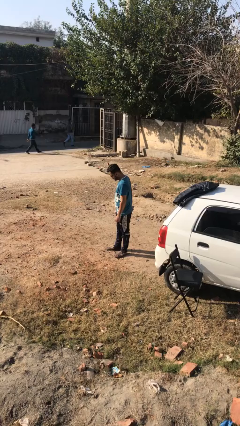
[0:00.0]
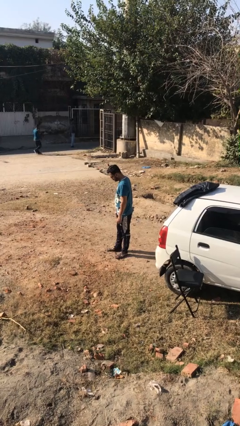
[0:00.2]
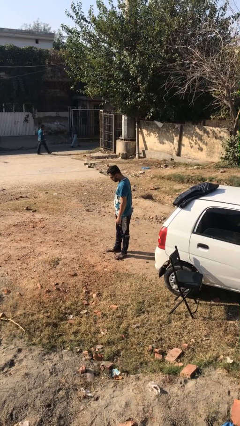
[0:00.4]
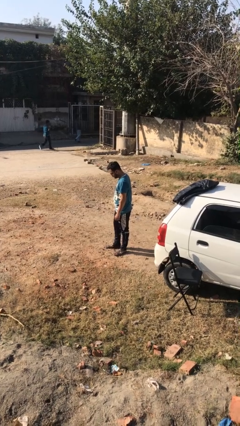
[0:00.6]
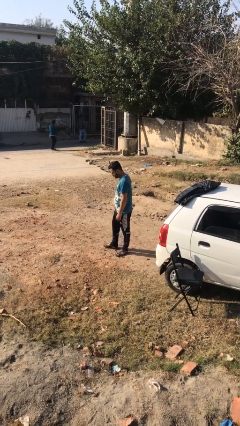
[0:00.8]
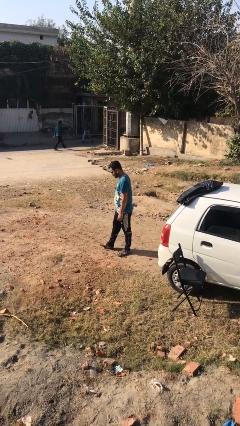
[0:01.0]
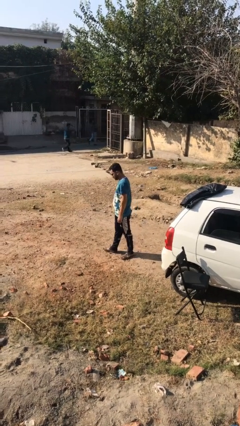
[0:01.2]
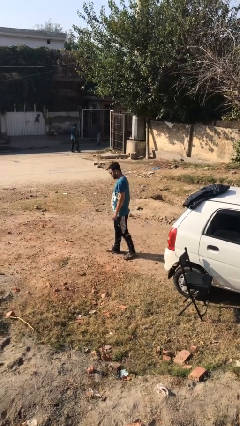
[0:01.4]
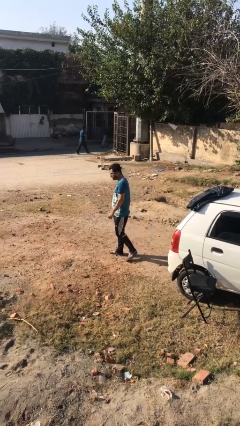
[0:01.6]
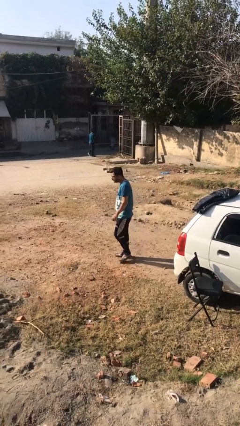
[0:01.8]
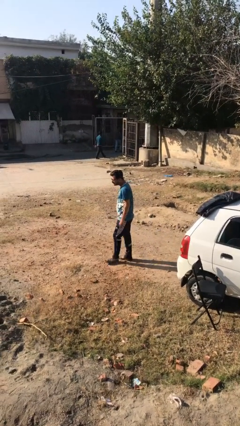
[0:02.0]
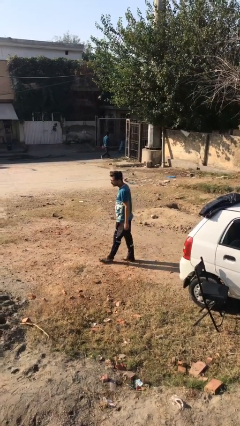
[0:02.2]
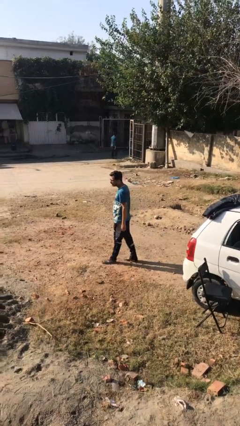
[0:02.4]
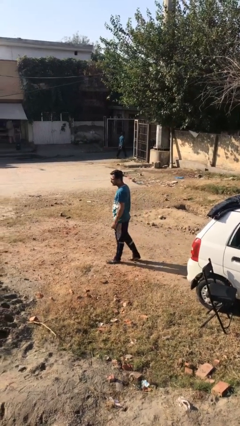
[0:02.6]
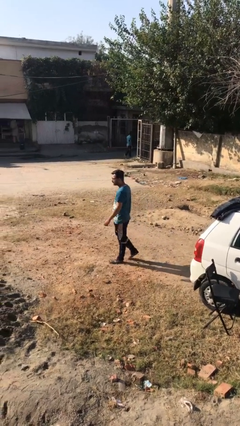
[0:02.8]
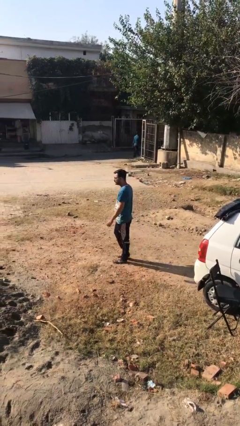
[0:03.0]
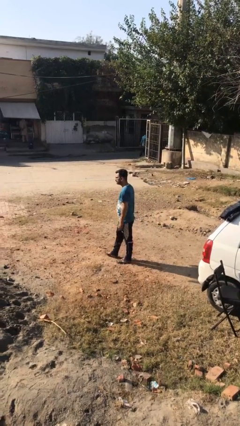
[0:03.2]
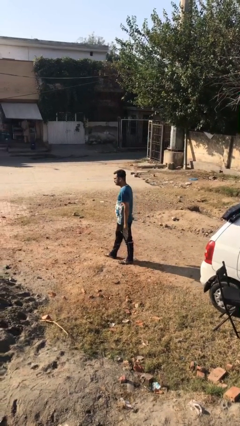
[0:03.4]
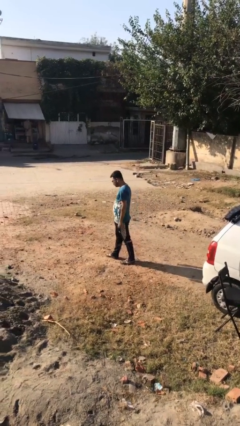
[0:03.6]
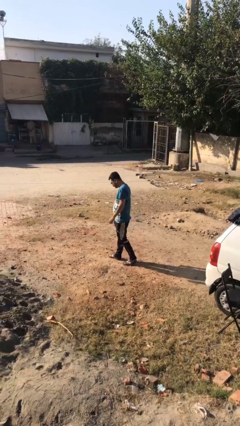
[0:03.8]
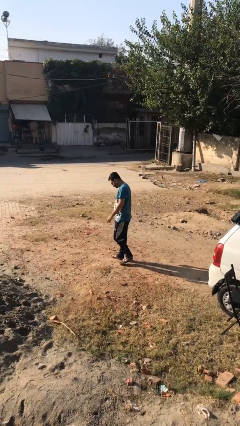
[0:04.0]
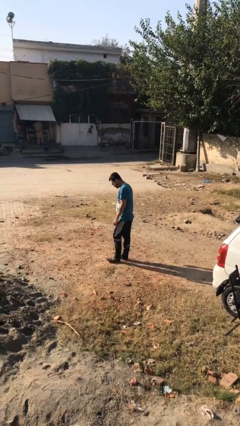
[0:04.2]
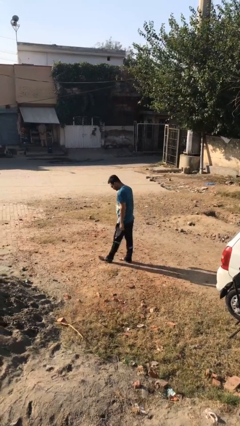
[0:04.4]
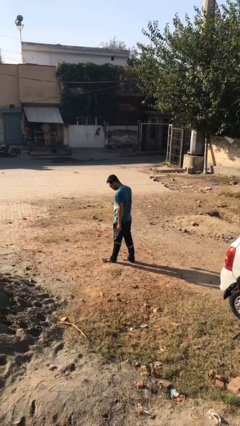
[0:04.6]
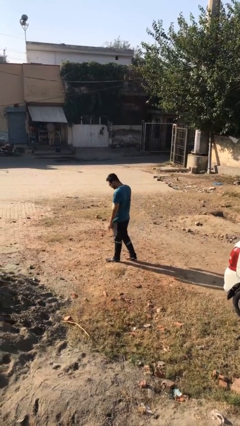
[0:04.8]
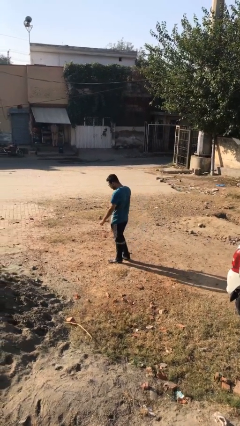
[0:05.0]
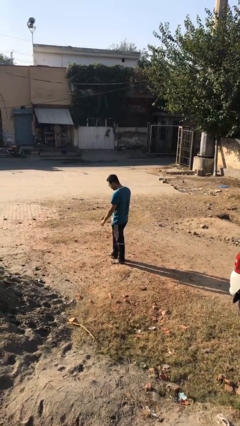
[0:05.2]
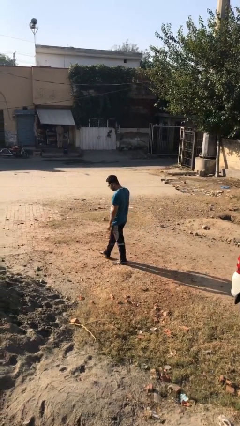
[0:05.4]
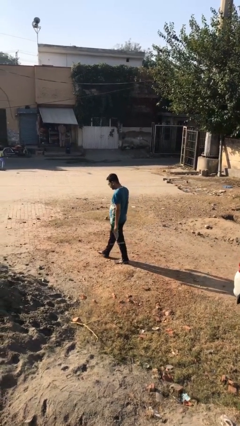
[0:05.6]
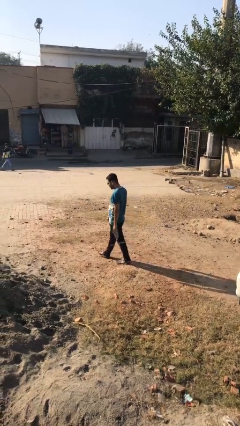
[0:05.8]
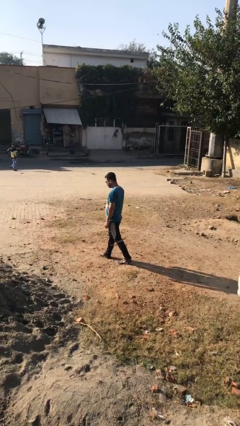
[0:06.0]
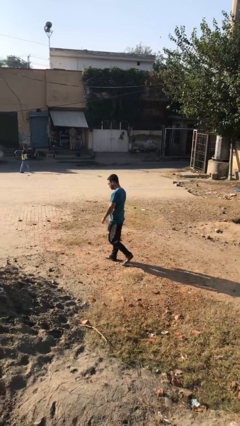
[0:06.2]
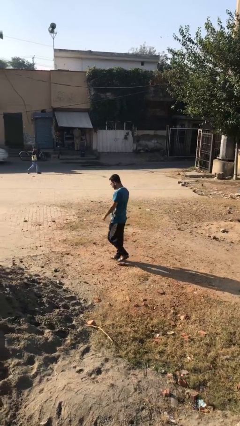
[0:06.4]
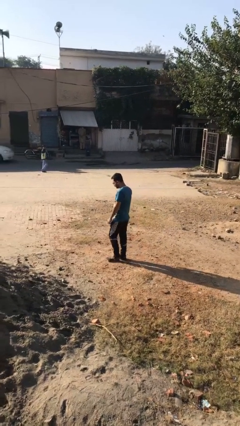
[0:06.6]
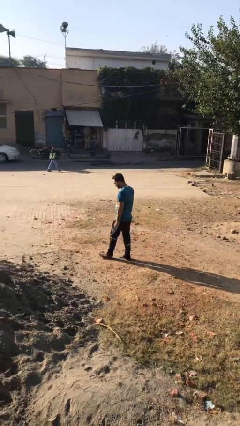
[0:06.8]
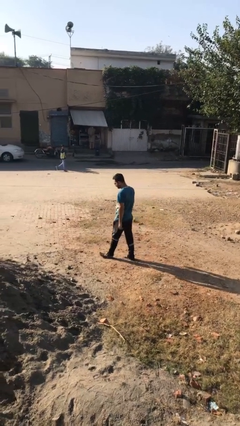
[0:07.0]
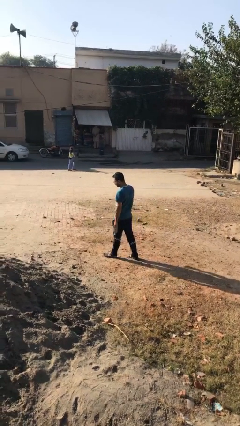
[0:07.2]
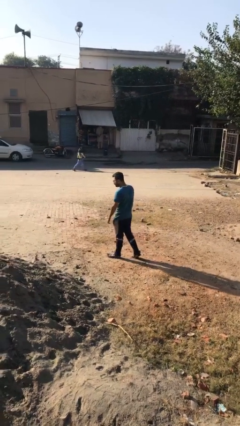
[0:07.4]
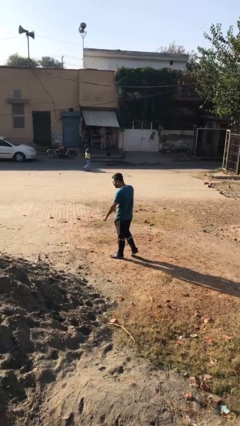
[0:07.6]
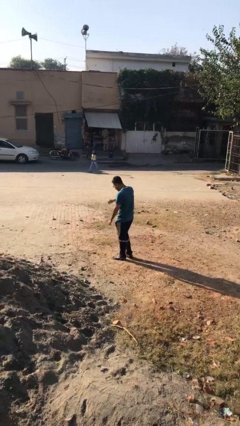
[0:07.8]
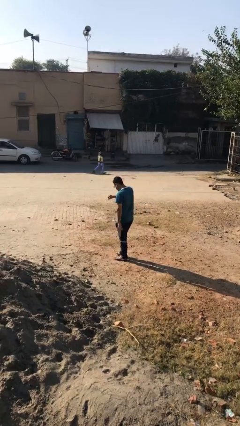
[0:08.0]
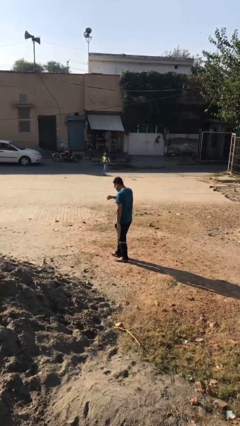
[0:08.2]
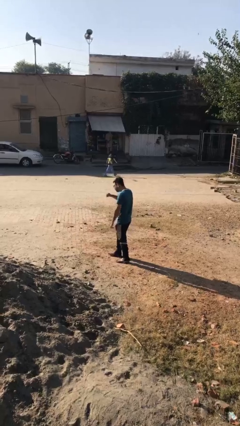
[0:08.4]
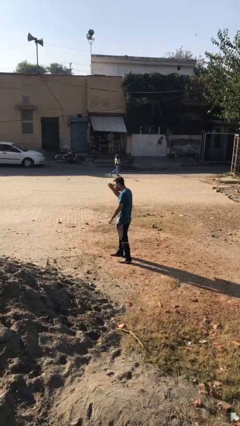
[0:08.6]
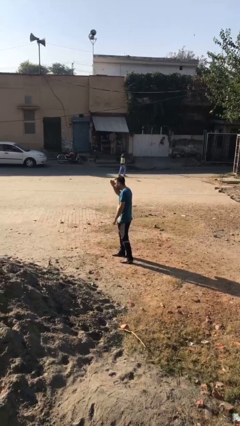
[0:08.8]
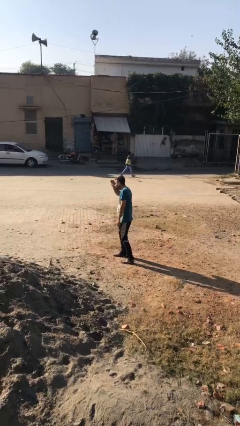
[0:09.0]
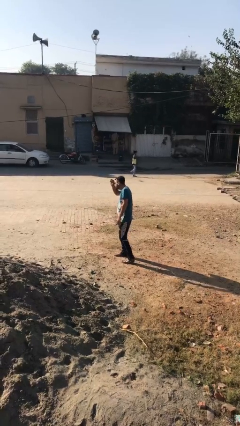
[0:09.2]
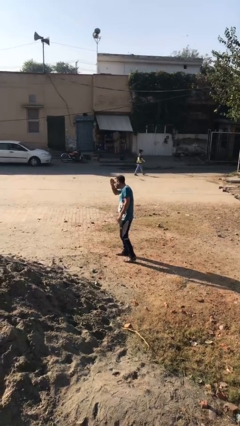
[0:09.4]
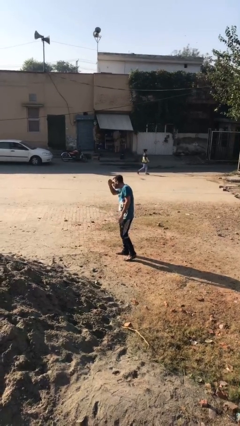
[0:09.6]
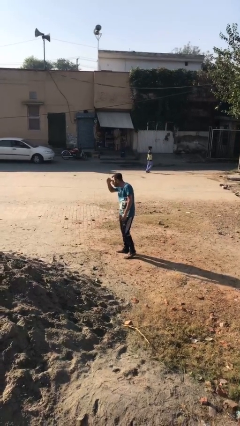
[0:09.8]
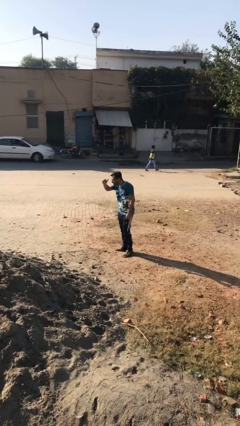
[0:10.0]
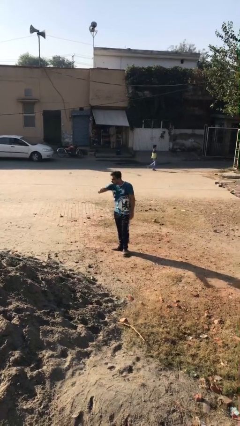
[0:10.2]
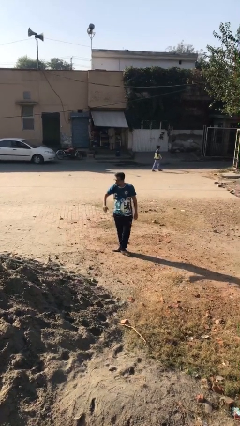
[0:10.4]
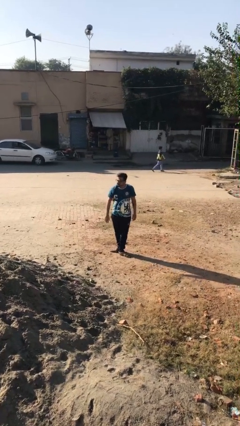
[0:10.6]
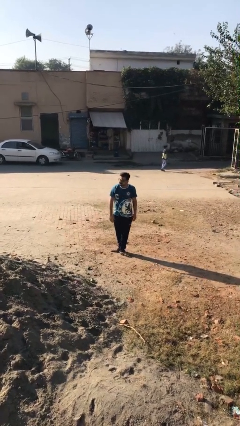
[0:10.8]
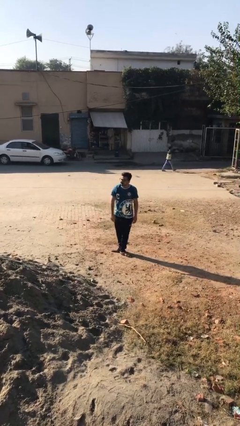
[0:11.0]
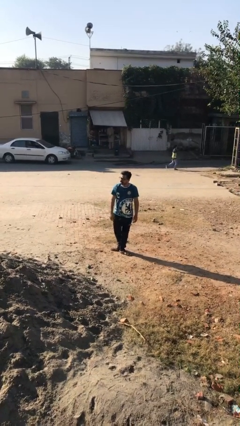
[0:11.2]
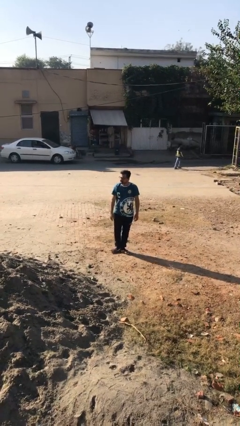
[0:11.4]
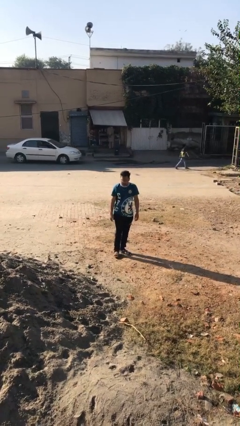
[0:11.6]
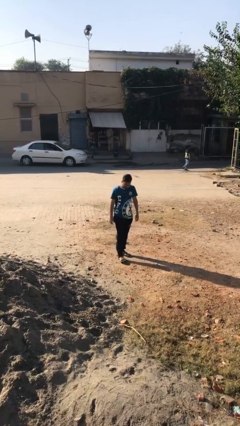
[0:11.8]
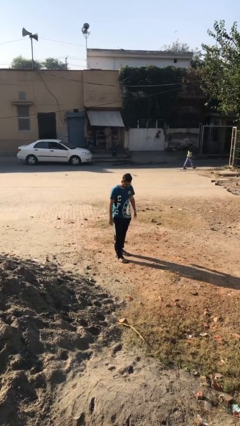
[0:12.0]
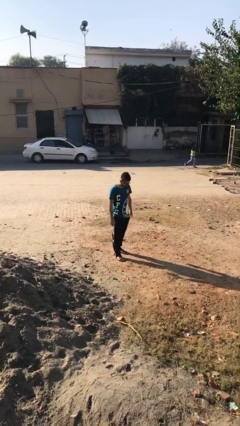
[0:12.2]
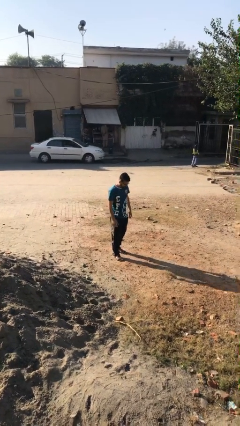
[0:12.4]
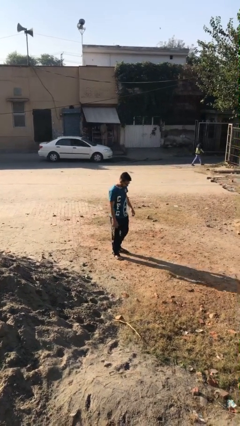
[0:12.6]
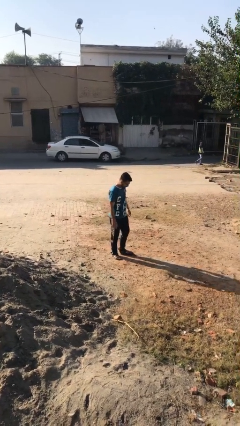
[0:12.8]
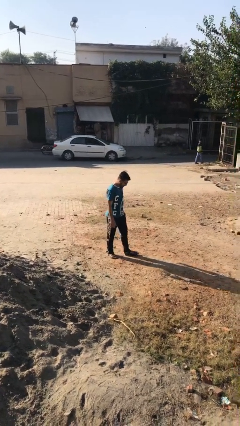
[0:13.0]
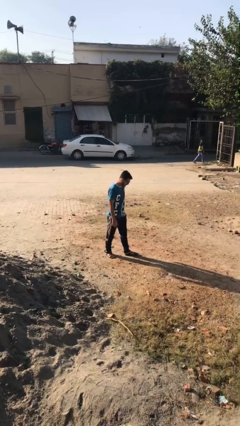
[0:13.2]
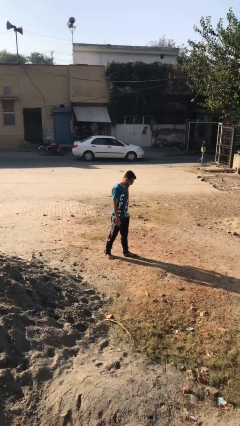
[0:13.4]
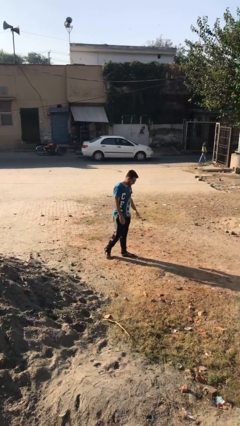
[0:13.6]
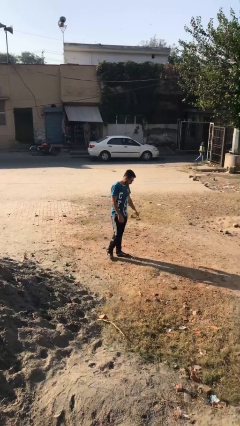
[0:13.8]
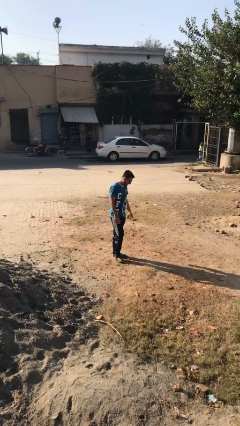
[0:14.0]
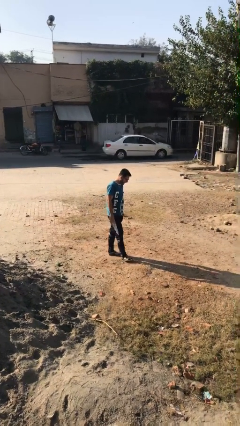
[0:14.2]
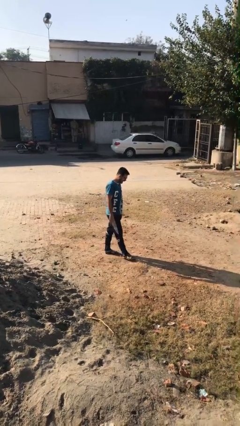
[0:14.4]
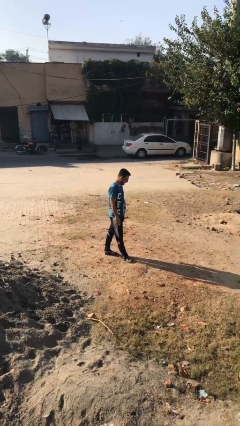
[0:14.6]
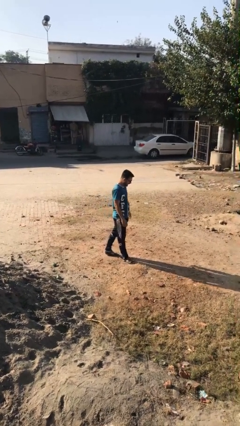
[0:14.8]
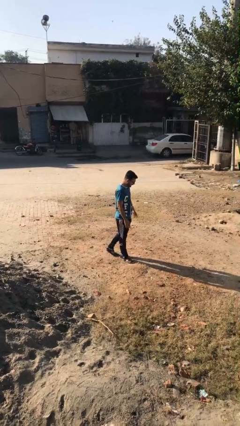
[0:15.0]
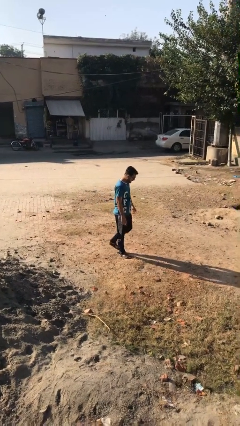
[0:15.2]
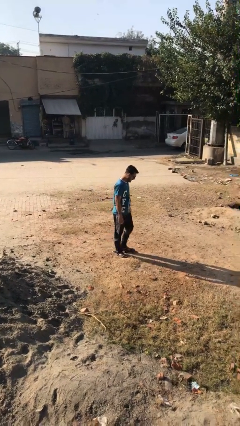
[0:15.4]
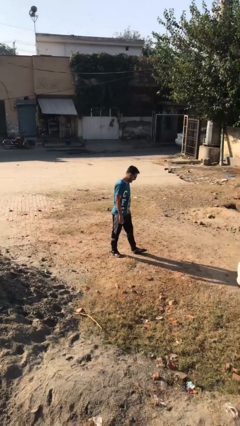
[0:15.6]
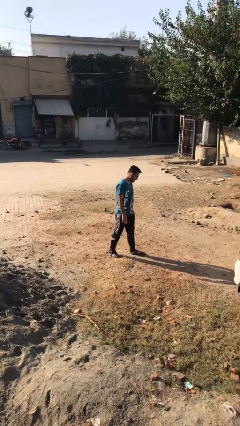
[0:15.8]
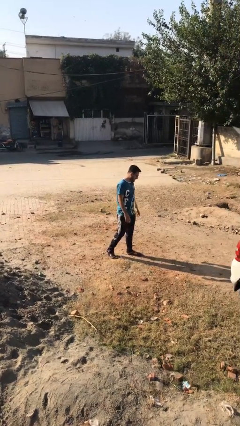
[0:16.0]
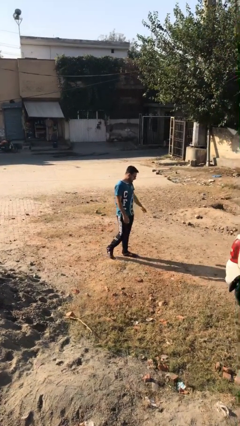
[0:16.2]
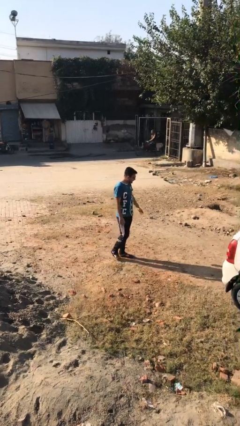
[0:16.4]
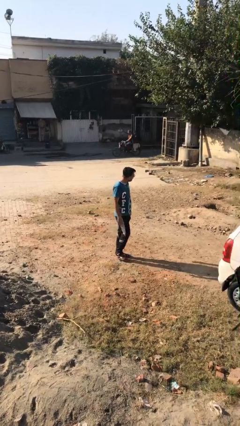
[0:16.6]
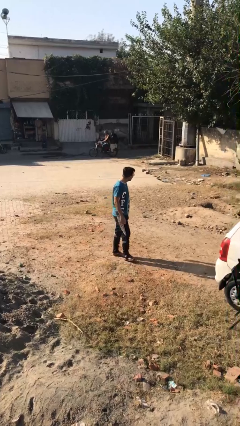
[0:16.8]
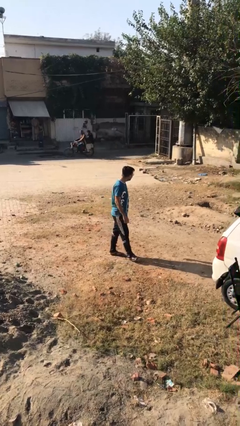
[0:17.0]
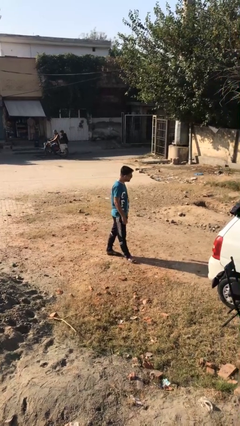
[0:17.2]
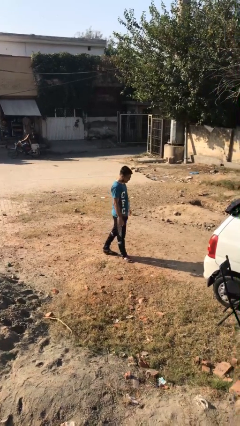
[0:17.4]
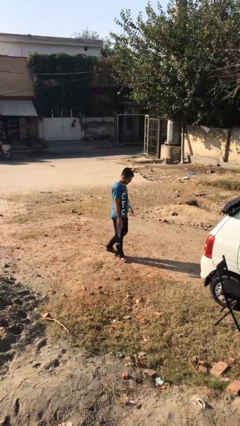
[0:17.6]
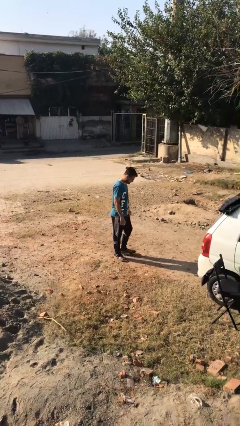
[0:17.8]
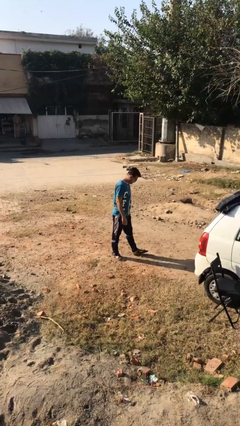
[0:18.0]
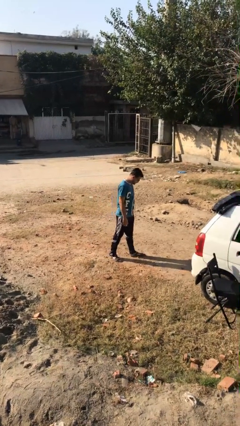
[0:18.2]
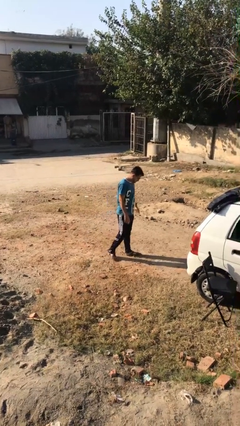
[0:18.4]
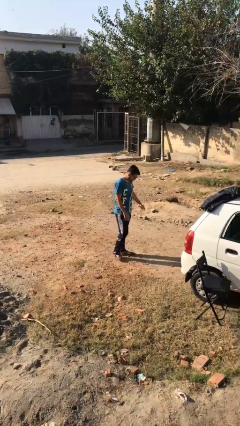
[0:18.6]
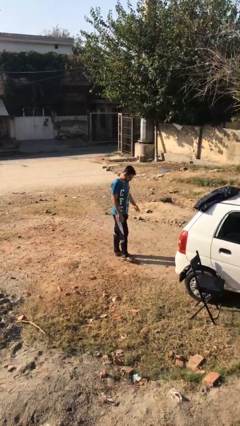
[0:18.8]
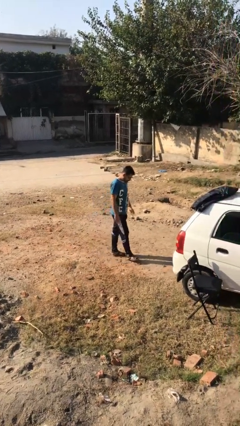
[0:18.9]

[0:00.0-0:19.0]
person walks
